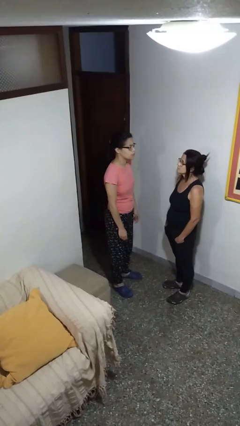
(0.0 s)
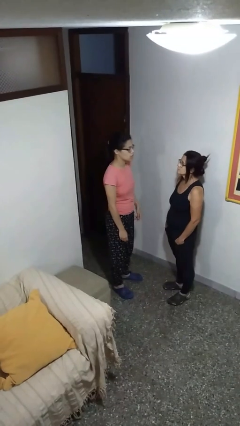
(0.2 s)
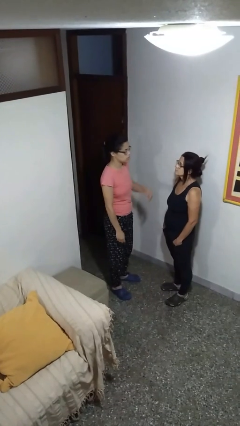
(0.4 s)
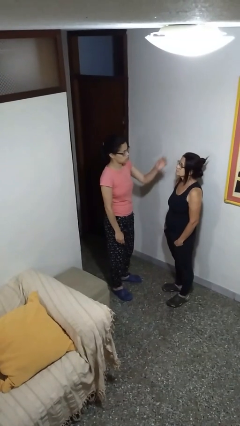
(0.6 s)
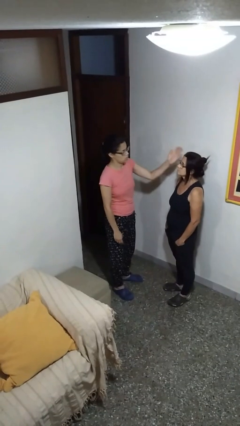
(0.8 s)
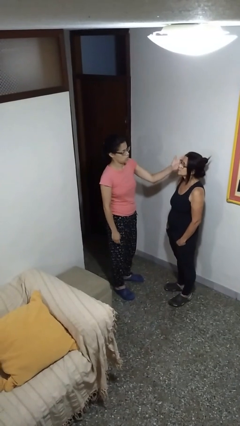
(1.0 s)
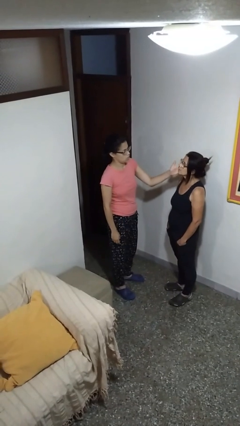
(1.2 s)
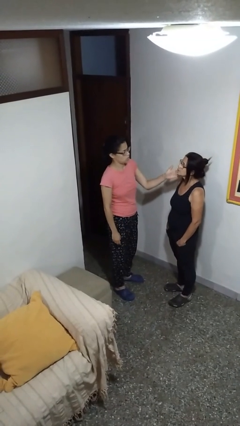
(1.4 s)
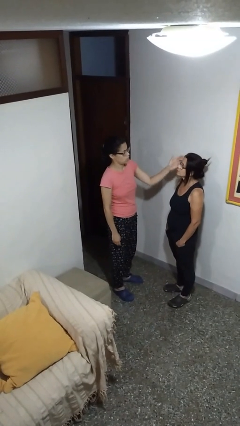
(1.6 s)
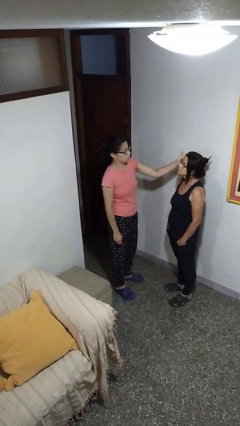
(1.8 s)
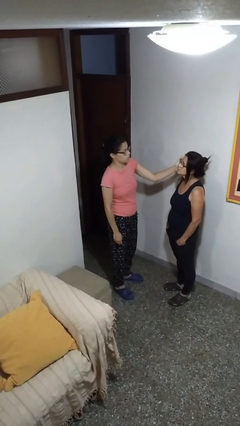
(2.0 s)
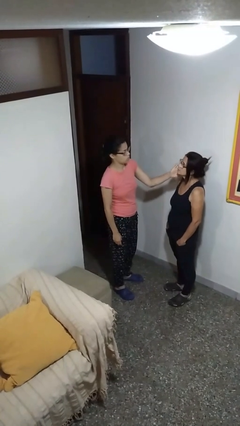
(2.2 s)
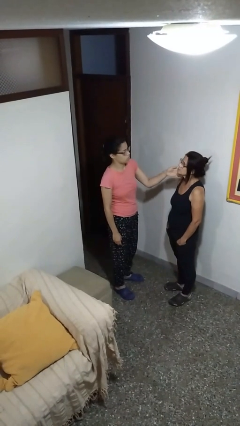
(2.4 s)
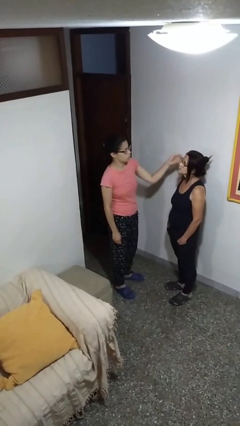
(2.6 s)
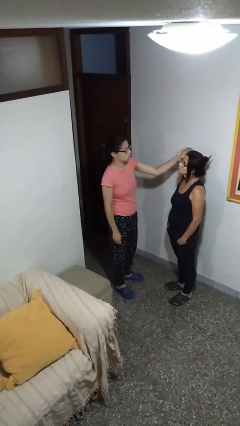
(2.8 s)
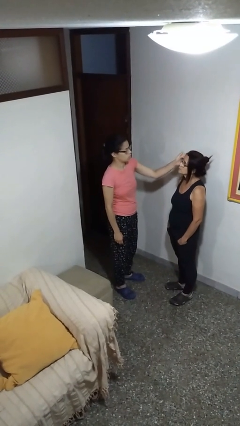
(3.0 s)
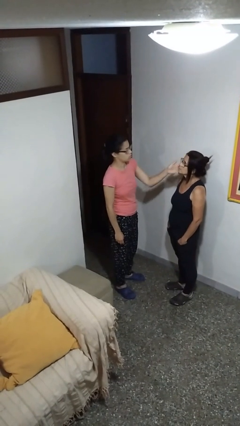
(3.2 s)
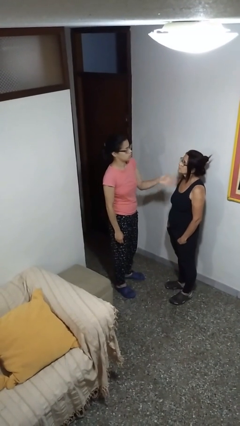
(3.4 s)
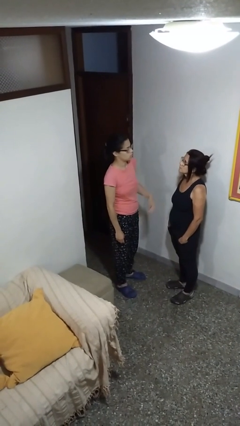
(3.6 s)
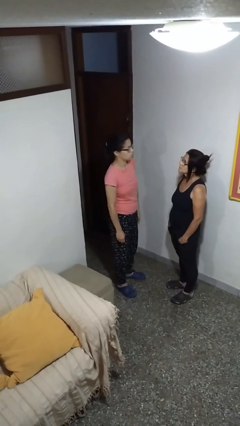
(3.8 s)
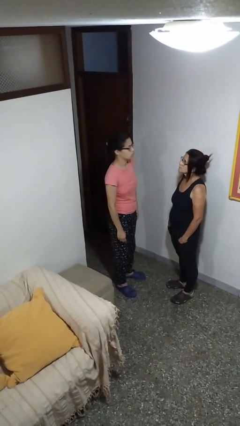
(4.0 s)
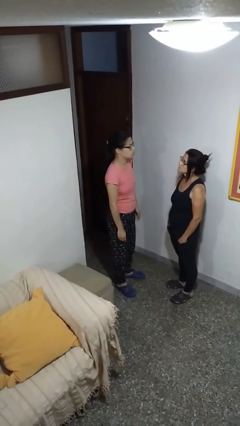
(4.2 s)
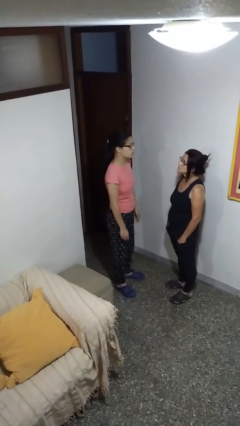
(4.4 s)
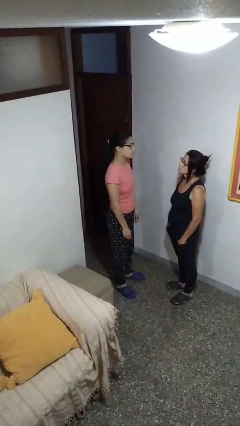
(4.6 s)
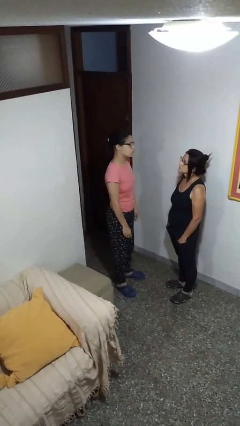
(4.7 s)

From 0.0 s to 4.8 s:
person touches face of person

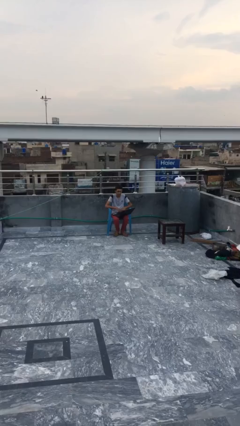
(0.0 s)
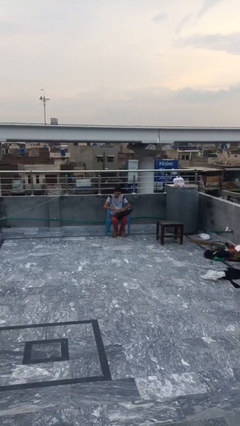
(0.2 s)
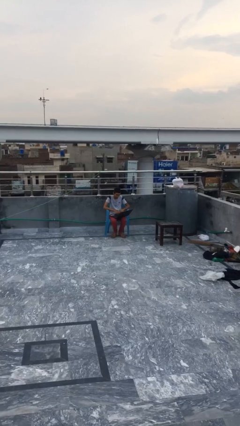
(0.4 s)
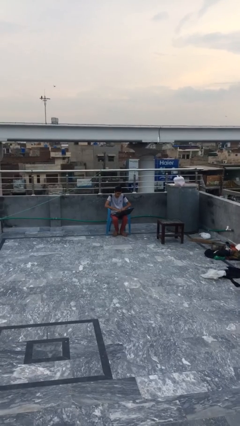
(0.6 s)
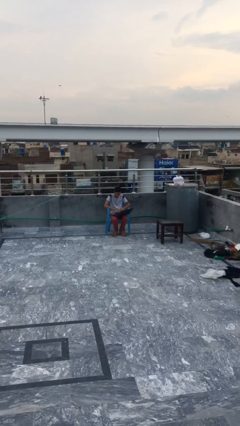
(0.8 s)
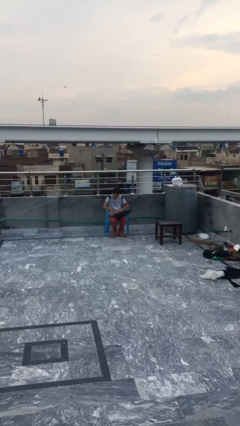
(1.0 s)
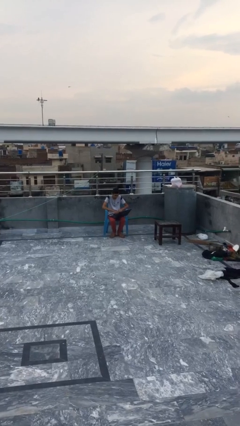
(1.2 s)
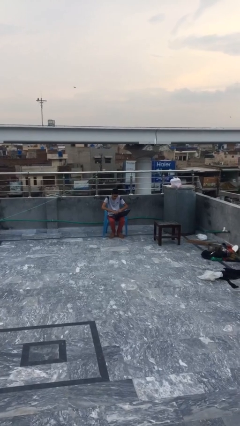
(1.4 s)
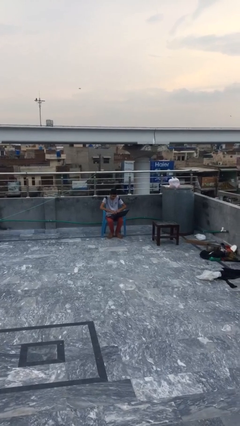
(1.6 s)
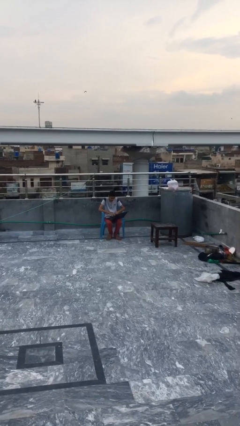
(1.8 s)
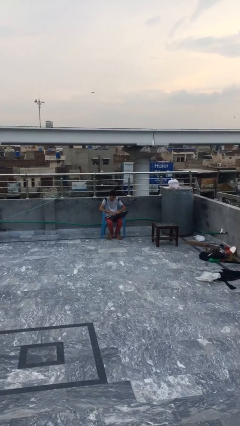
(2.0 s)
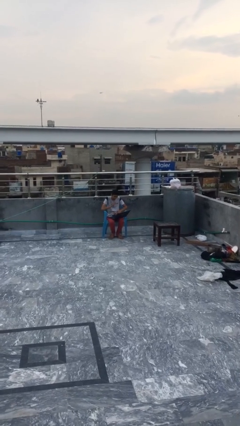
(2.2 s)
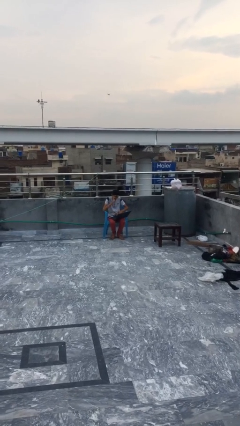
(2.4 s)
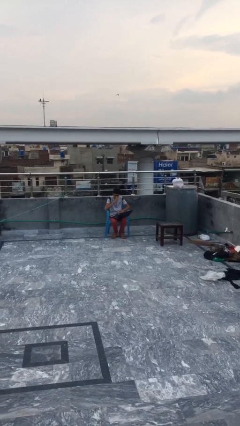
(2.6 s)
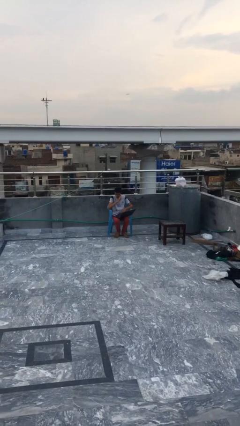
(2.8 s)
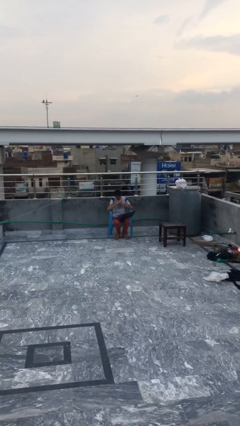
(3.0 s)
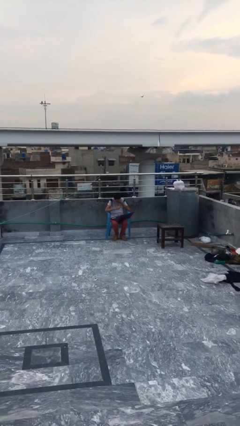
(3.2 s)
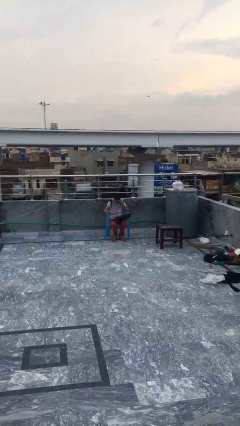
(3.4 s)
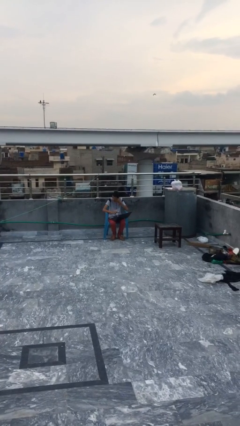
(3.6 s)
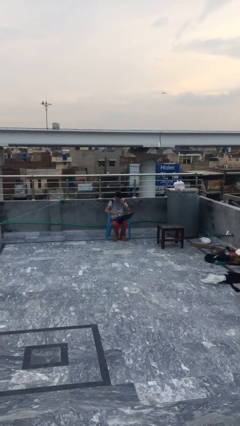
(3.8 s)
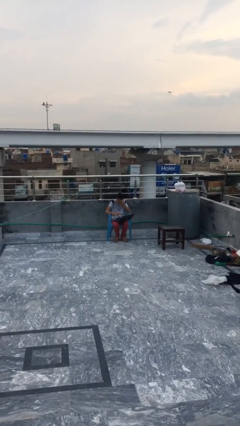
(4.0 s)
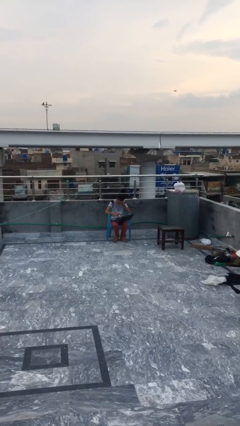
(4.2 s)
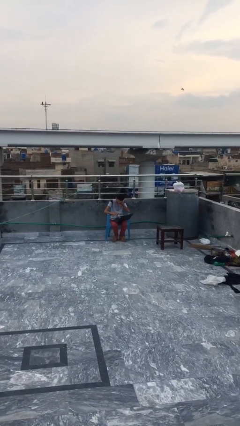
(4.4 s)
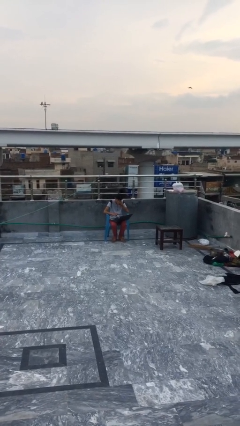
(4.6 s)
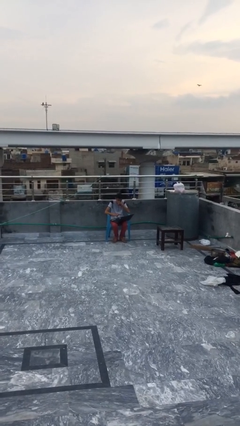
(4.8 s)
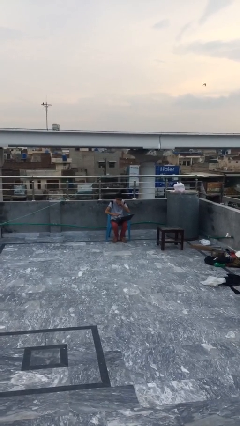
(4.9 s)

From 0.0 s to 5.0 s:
person interacts with laptop

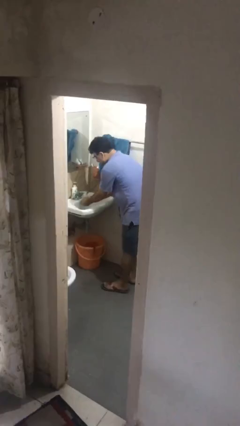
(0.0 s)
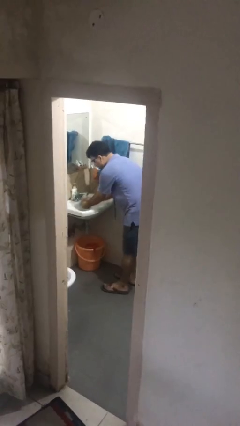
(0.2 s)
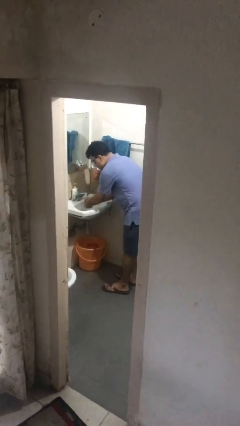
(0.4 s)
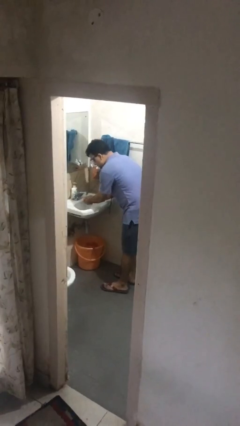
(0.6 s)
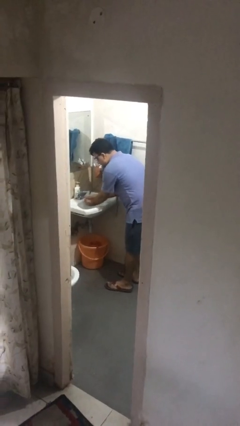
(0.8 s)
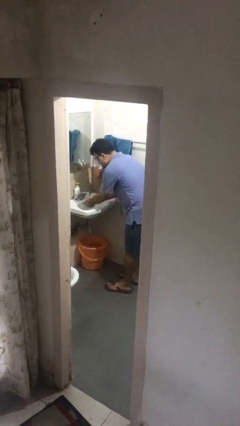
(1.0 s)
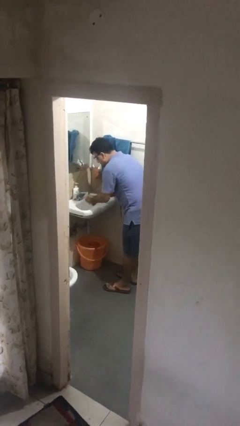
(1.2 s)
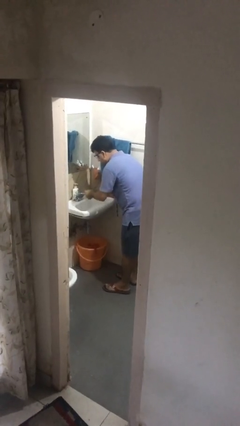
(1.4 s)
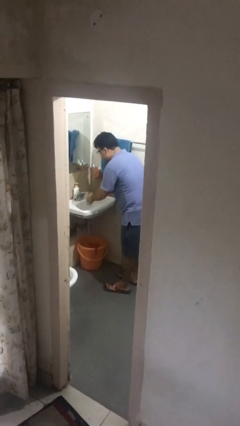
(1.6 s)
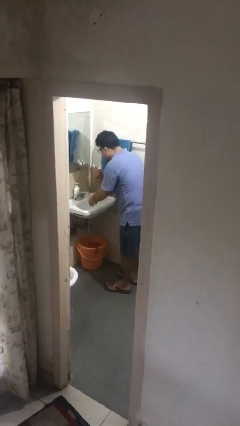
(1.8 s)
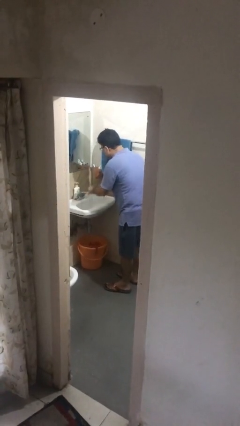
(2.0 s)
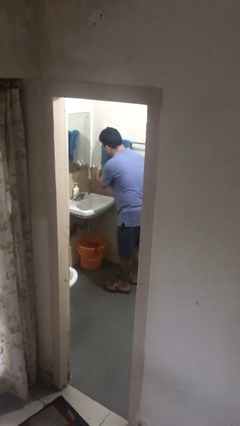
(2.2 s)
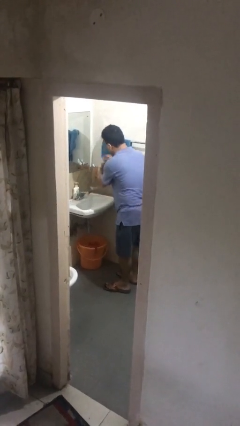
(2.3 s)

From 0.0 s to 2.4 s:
person washes hands

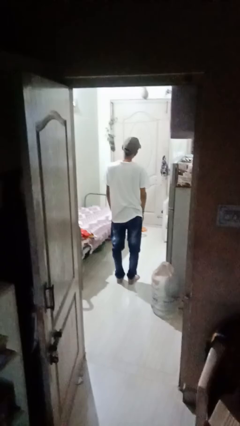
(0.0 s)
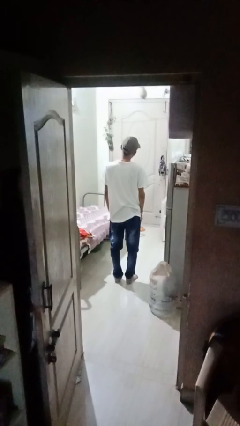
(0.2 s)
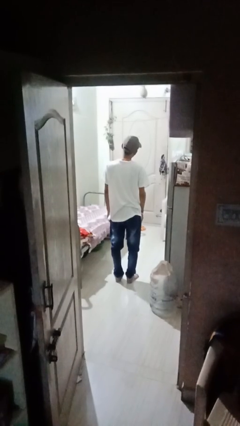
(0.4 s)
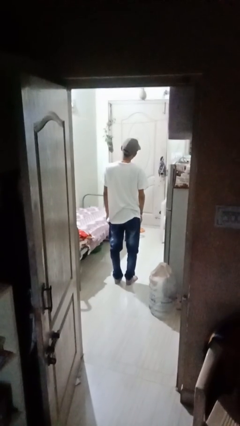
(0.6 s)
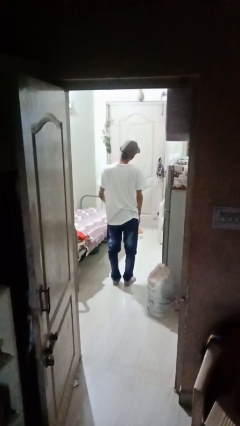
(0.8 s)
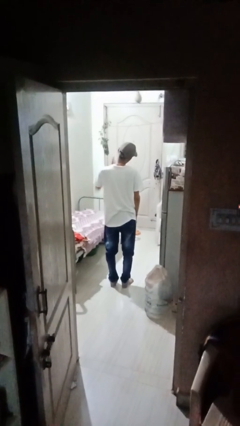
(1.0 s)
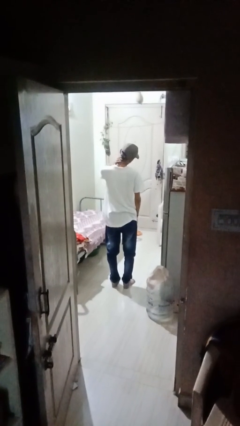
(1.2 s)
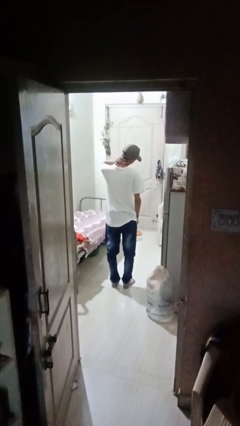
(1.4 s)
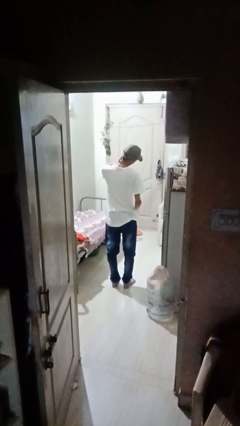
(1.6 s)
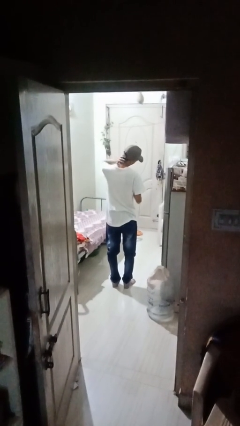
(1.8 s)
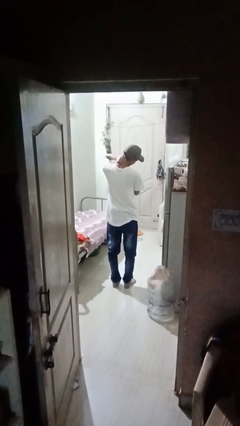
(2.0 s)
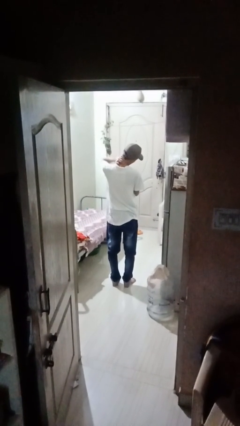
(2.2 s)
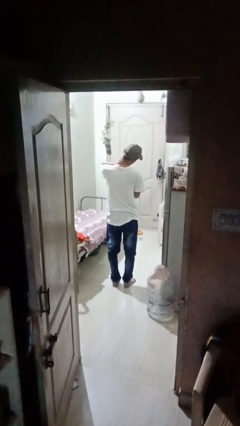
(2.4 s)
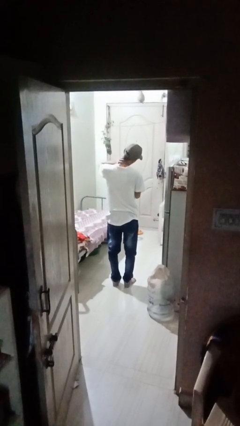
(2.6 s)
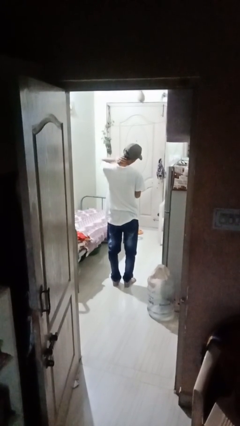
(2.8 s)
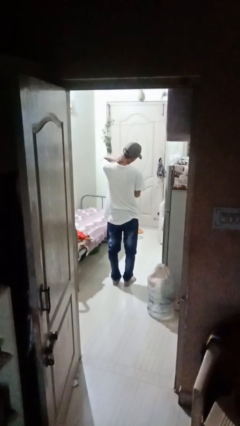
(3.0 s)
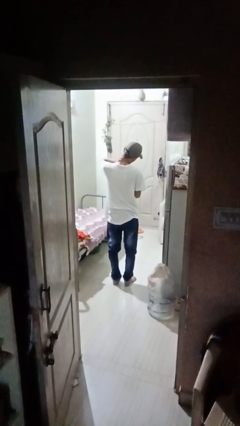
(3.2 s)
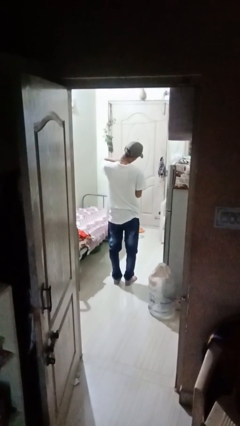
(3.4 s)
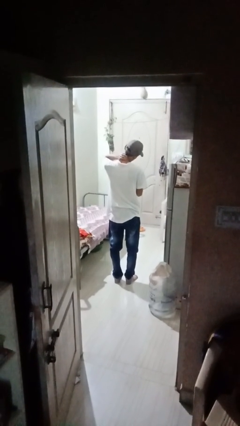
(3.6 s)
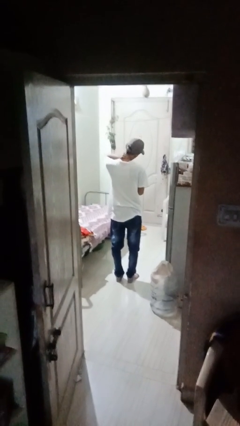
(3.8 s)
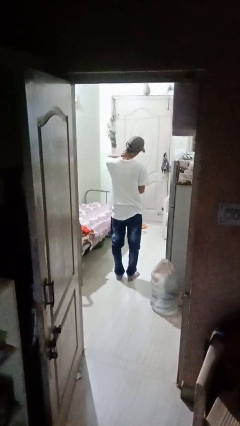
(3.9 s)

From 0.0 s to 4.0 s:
person rubs neck

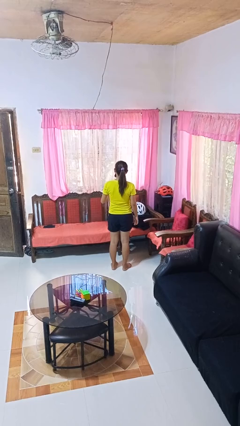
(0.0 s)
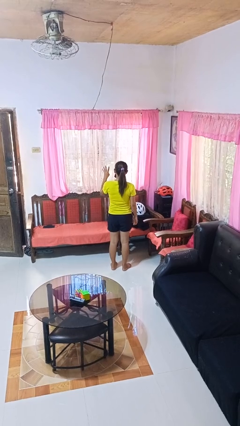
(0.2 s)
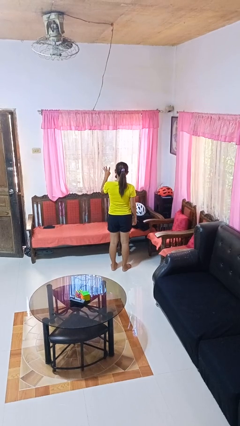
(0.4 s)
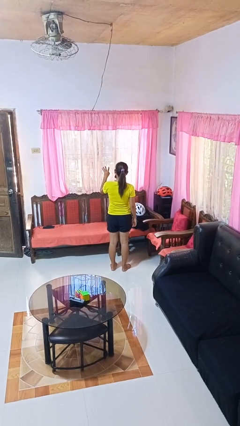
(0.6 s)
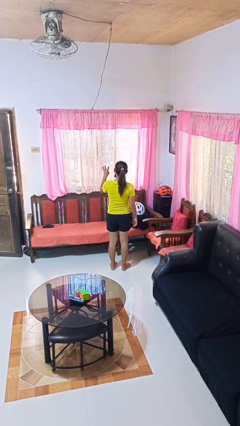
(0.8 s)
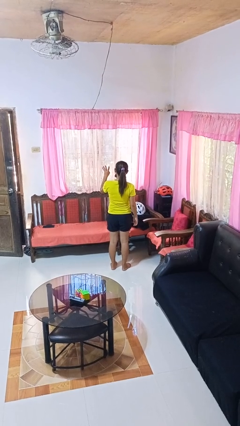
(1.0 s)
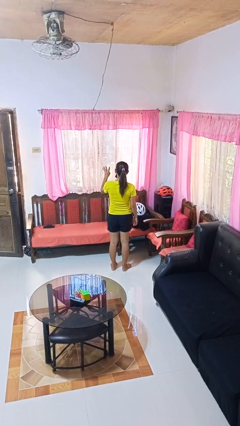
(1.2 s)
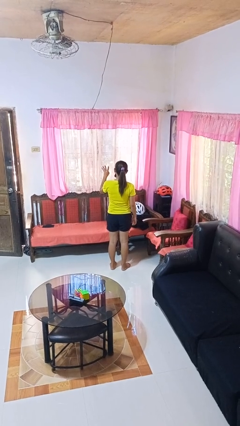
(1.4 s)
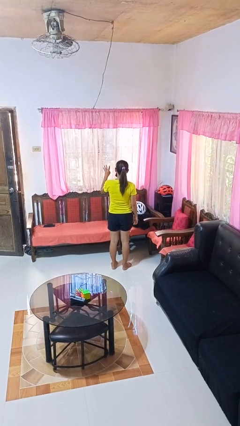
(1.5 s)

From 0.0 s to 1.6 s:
person gestures number four
